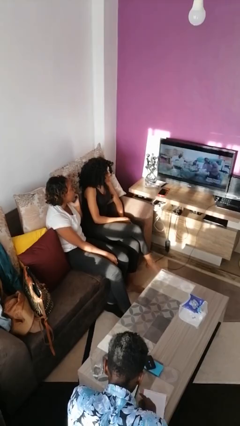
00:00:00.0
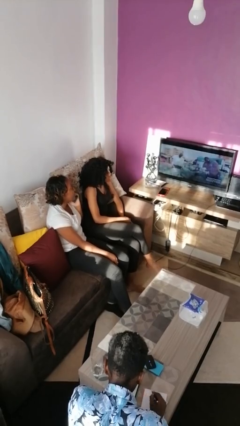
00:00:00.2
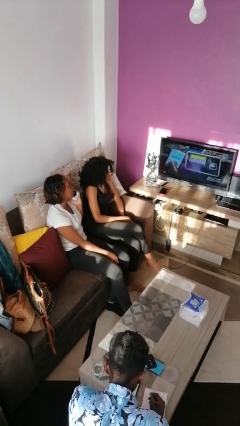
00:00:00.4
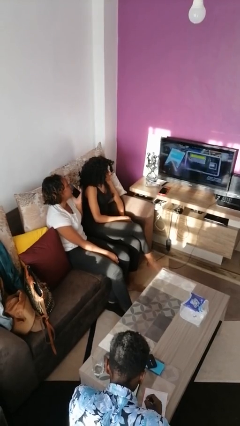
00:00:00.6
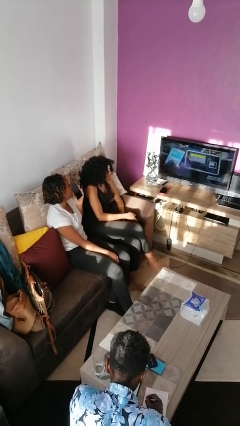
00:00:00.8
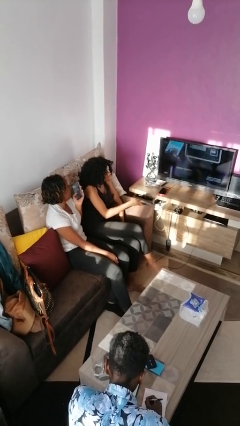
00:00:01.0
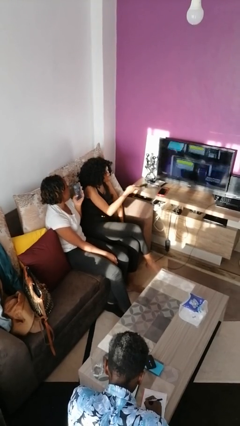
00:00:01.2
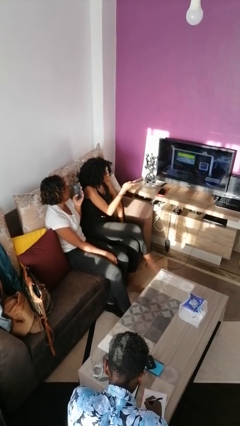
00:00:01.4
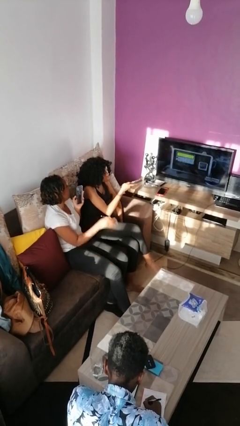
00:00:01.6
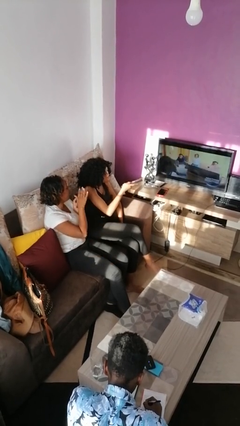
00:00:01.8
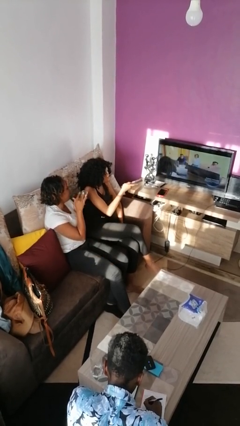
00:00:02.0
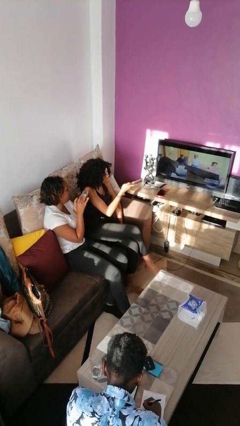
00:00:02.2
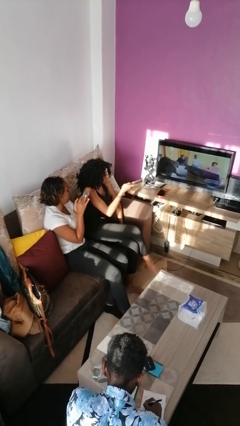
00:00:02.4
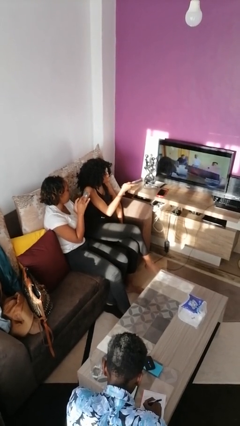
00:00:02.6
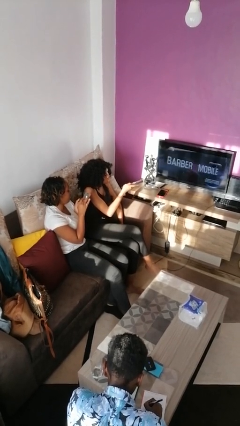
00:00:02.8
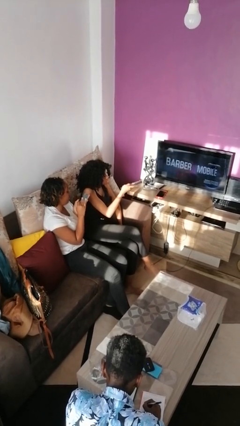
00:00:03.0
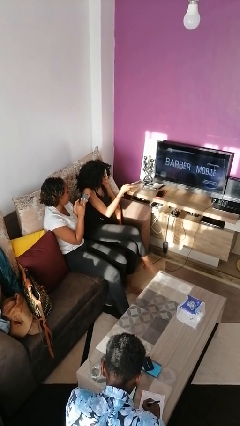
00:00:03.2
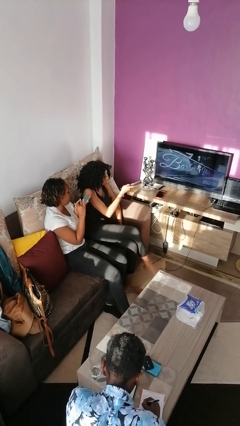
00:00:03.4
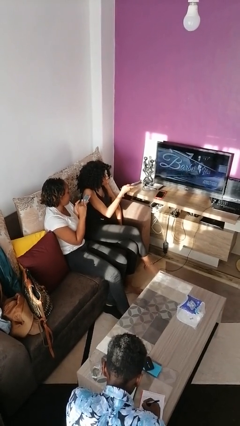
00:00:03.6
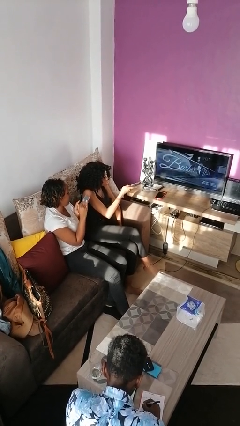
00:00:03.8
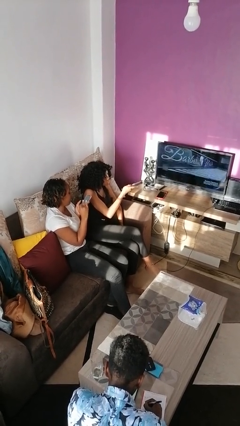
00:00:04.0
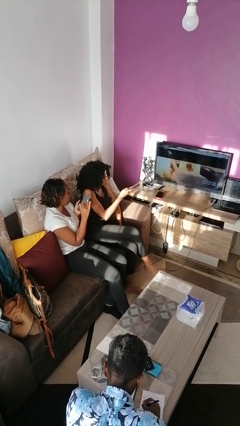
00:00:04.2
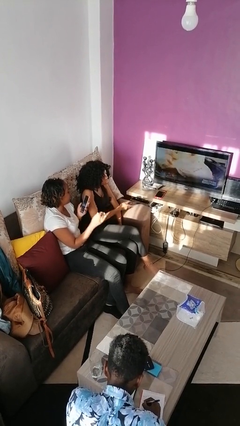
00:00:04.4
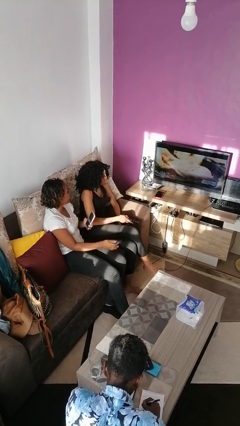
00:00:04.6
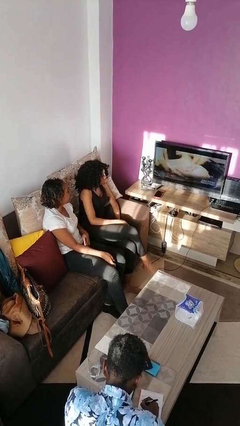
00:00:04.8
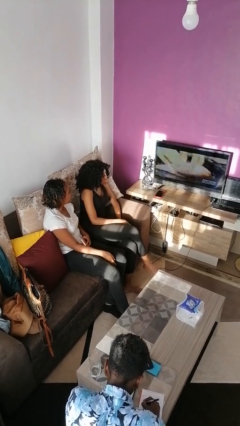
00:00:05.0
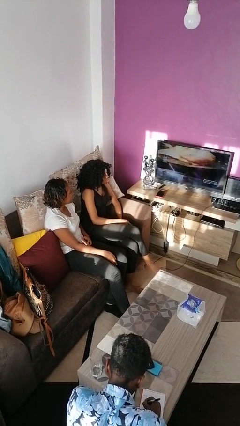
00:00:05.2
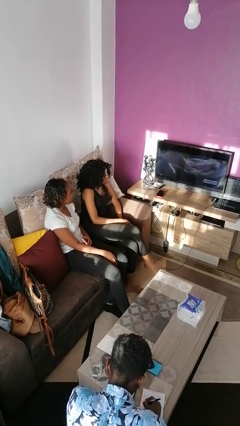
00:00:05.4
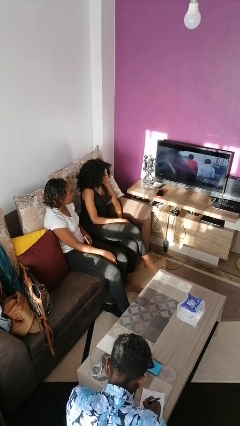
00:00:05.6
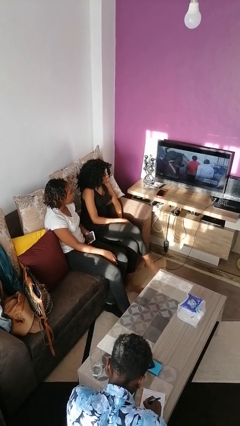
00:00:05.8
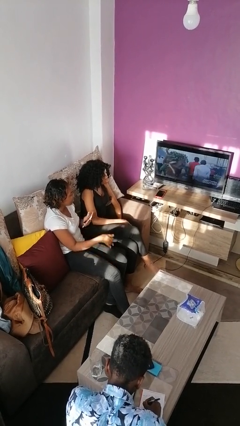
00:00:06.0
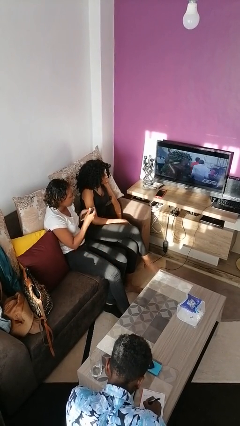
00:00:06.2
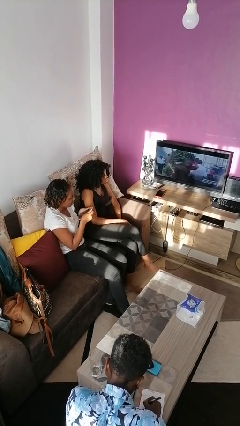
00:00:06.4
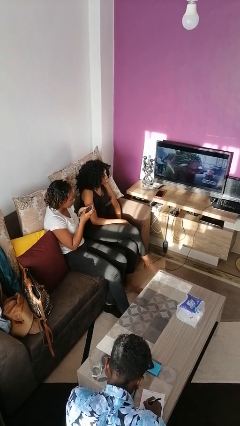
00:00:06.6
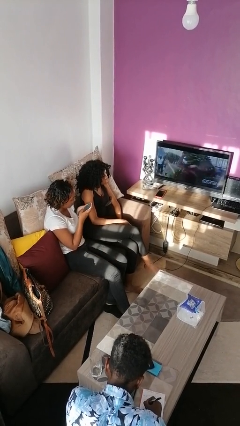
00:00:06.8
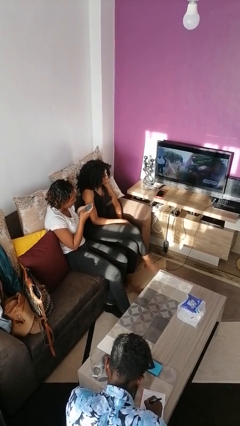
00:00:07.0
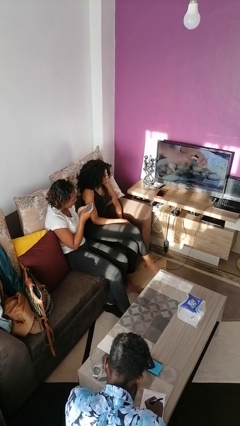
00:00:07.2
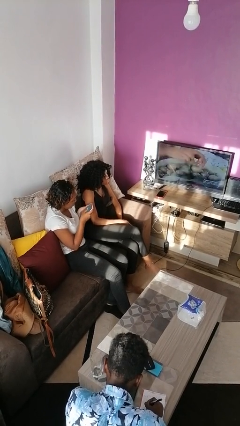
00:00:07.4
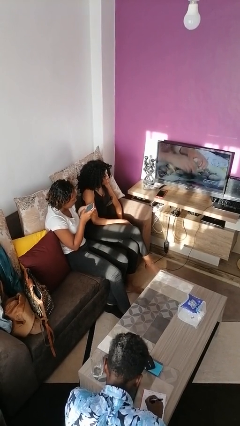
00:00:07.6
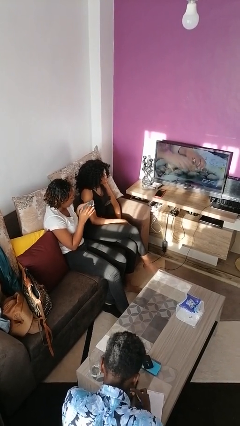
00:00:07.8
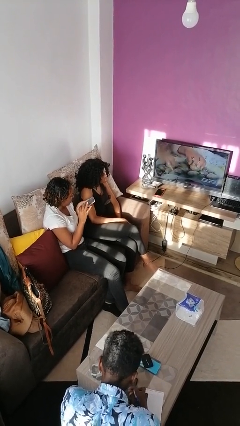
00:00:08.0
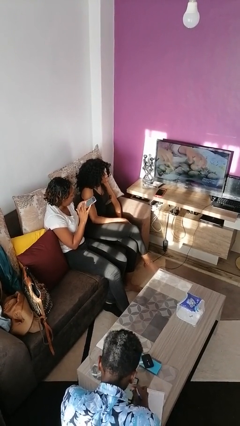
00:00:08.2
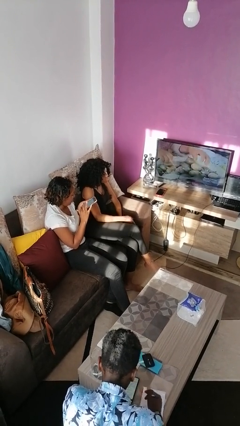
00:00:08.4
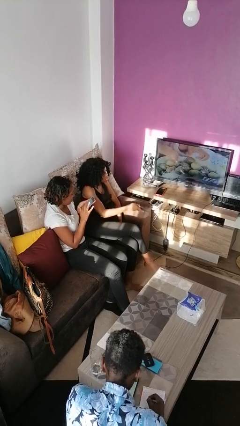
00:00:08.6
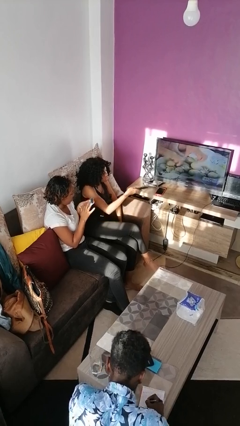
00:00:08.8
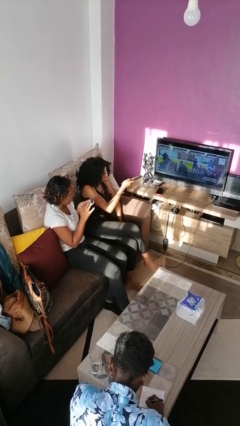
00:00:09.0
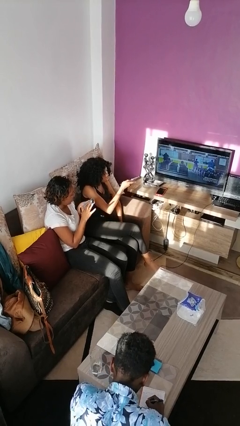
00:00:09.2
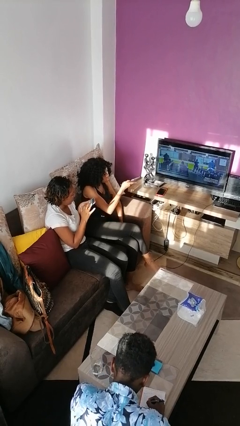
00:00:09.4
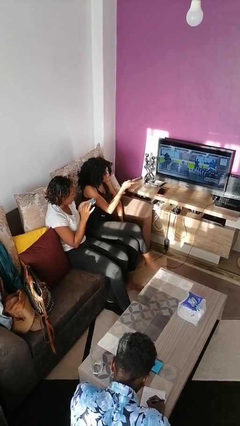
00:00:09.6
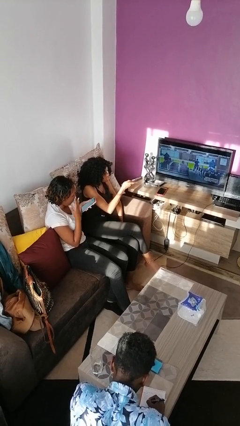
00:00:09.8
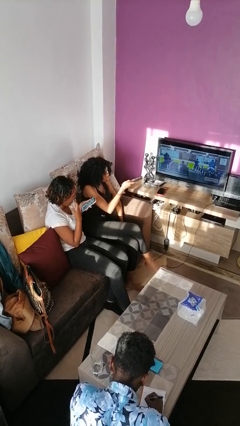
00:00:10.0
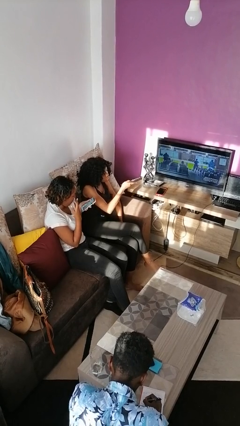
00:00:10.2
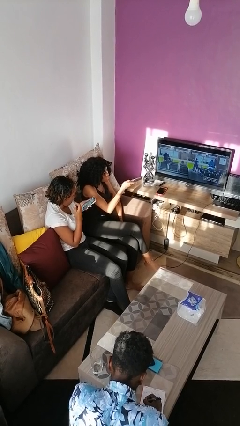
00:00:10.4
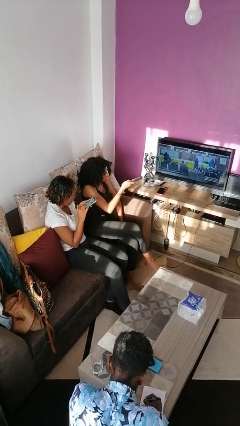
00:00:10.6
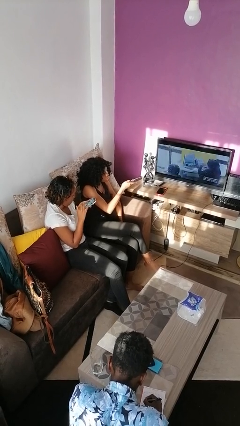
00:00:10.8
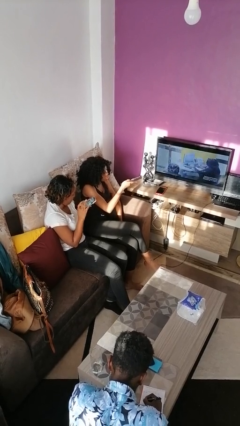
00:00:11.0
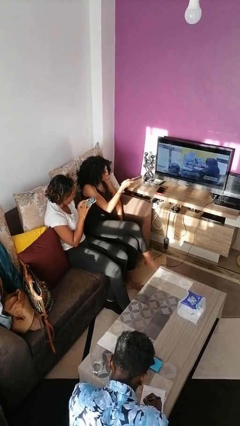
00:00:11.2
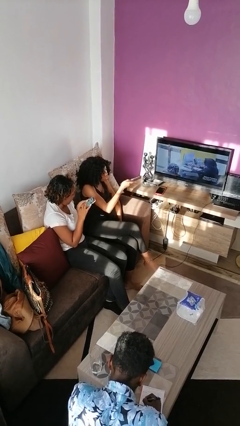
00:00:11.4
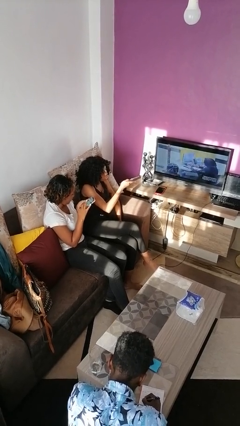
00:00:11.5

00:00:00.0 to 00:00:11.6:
person puts on boots

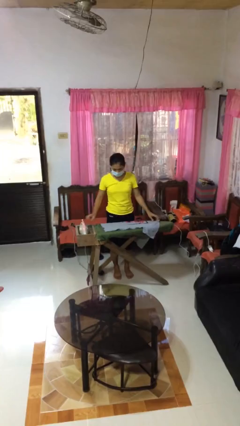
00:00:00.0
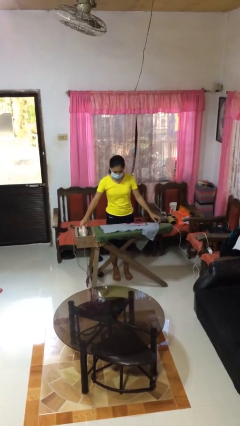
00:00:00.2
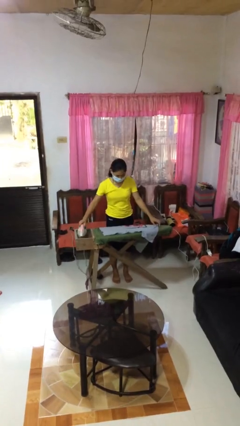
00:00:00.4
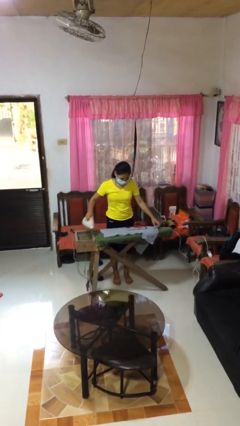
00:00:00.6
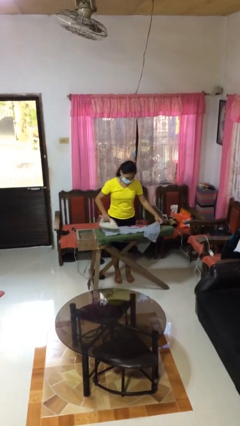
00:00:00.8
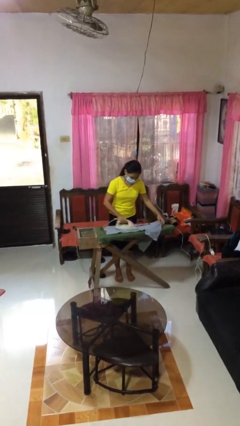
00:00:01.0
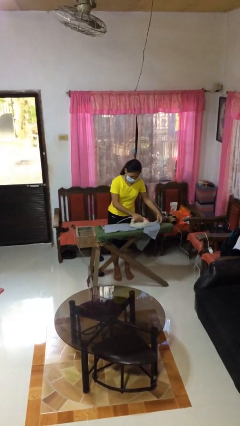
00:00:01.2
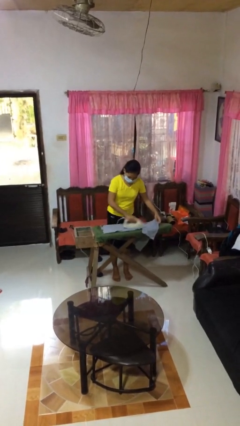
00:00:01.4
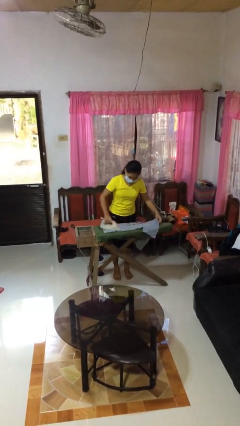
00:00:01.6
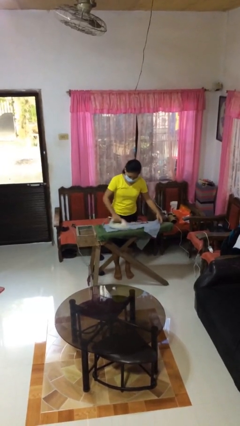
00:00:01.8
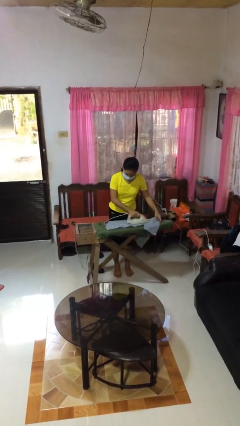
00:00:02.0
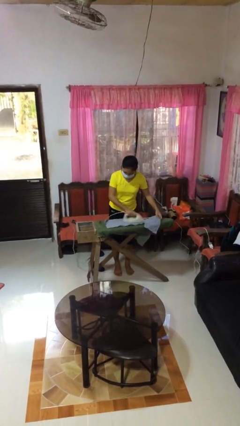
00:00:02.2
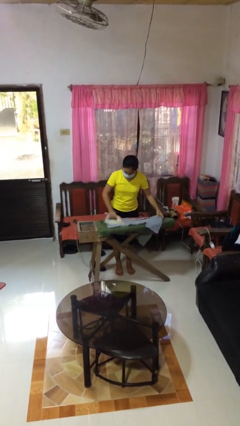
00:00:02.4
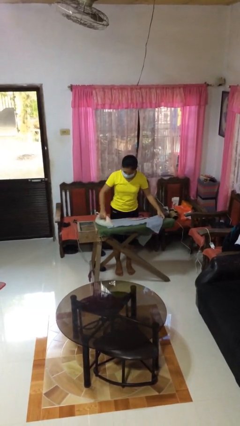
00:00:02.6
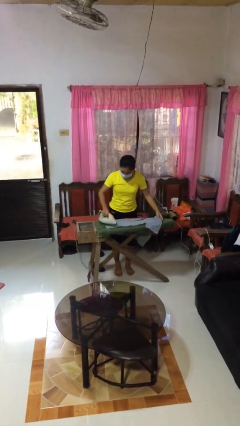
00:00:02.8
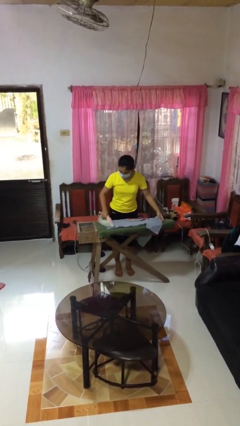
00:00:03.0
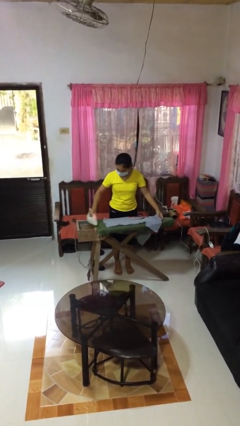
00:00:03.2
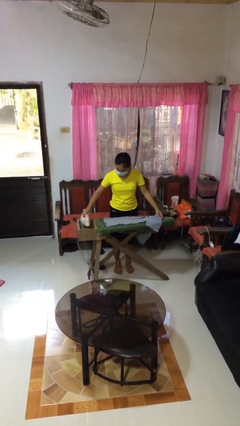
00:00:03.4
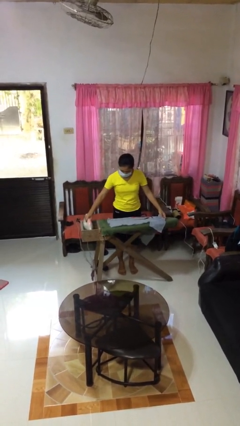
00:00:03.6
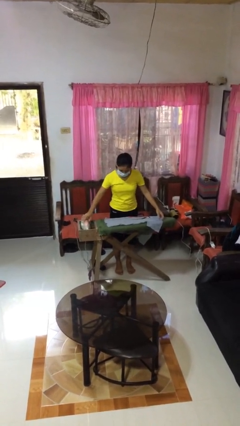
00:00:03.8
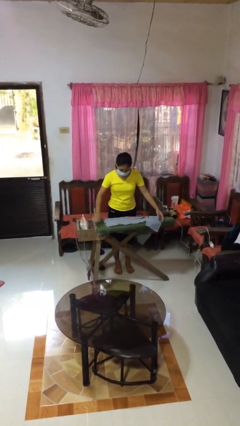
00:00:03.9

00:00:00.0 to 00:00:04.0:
person irons clothes

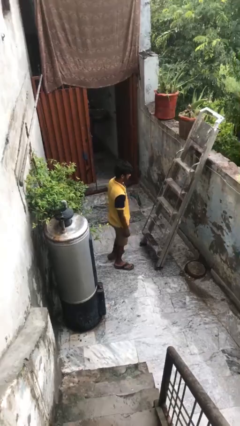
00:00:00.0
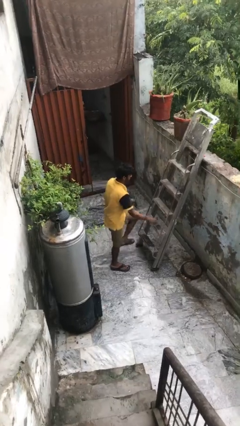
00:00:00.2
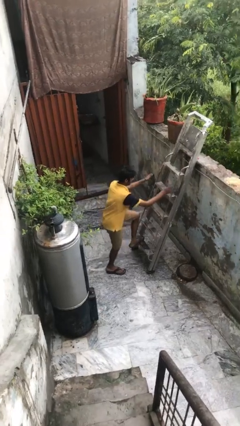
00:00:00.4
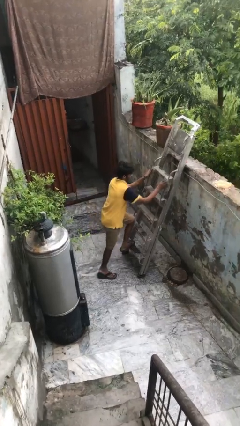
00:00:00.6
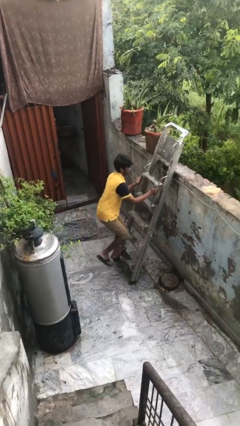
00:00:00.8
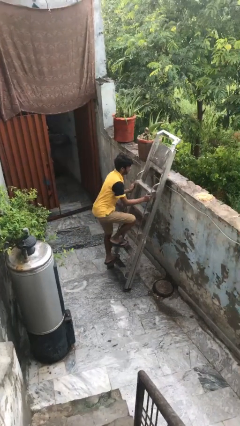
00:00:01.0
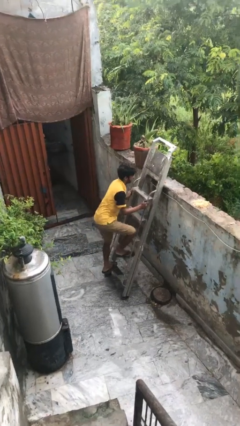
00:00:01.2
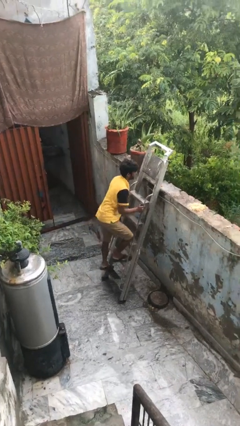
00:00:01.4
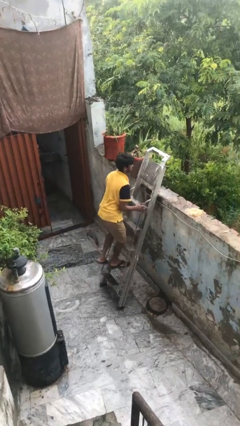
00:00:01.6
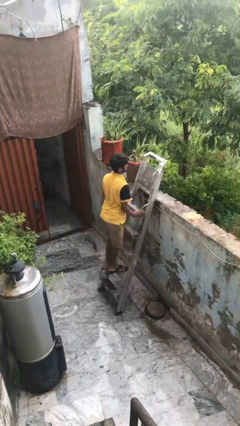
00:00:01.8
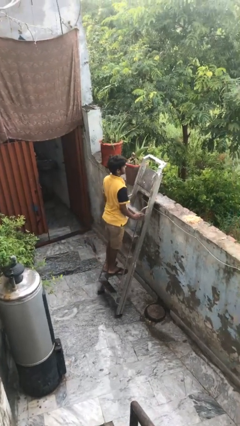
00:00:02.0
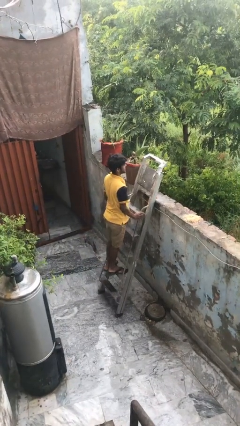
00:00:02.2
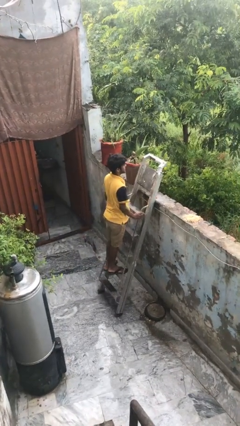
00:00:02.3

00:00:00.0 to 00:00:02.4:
person climbs up ladder
